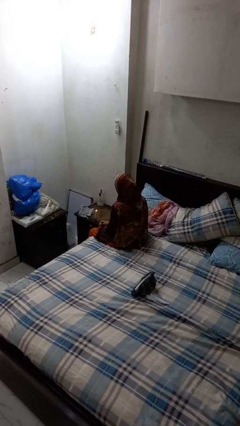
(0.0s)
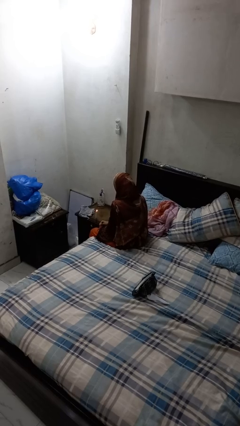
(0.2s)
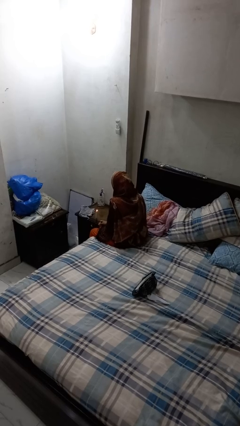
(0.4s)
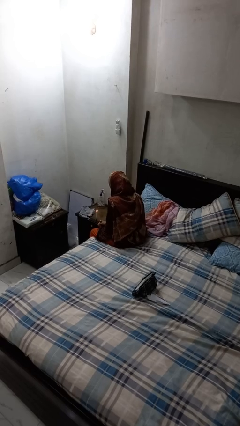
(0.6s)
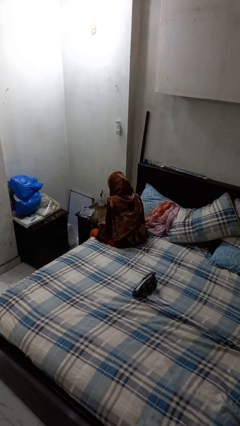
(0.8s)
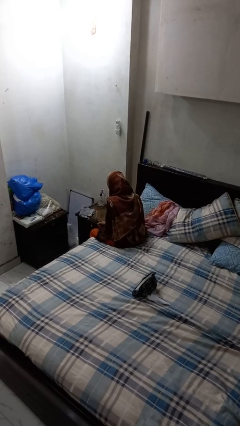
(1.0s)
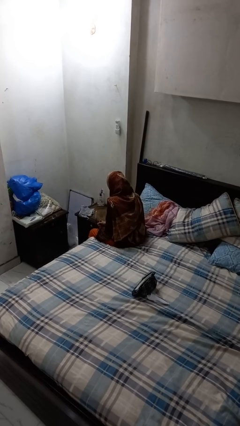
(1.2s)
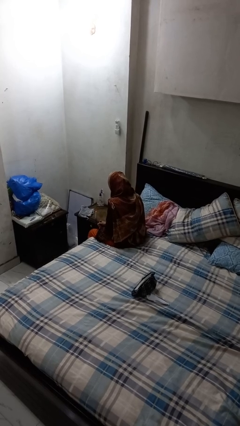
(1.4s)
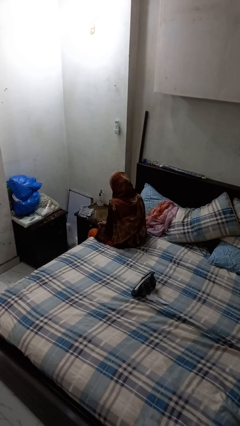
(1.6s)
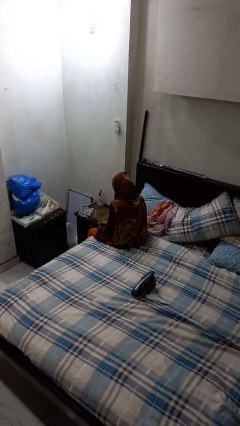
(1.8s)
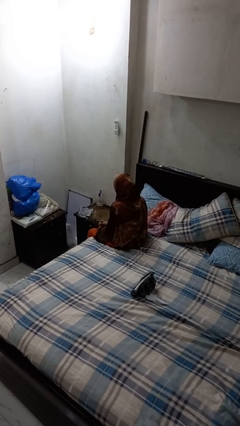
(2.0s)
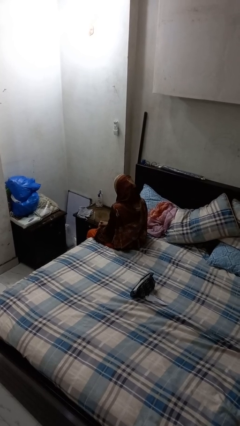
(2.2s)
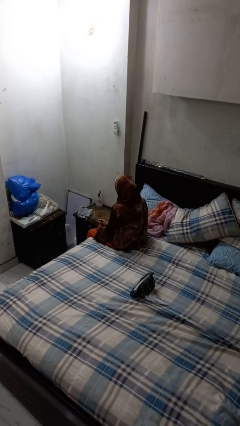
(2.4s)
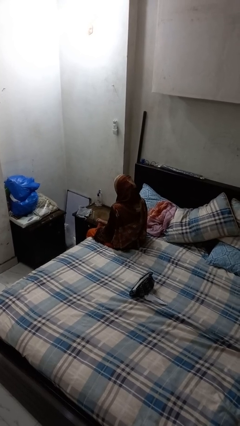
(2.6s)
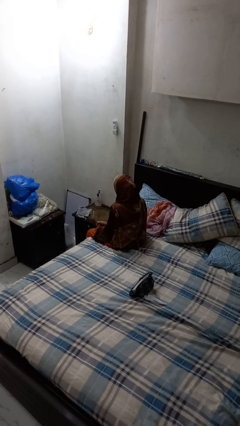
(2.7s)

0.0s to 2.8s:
person extinguishes candle

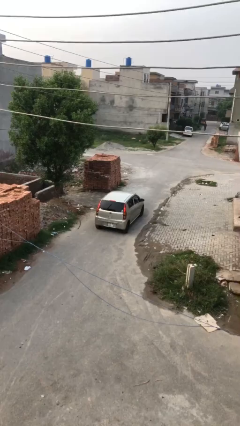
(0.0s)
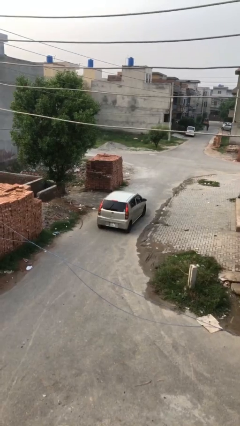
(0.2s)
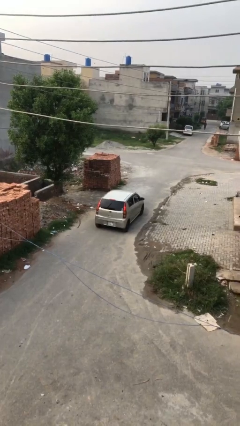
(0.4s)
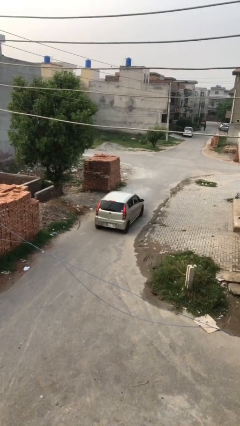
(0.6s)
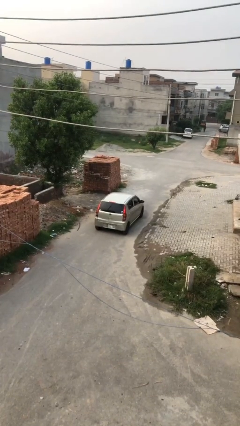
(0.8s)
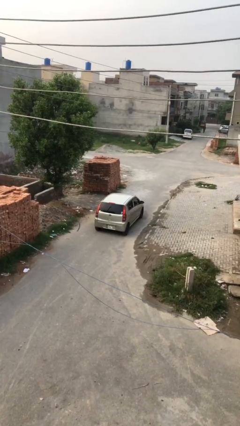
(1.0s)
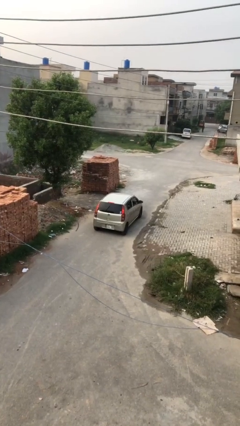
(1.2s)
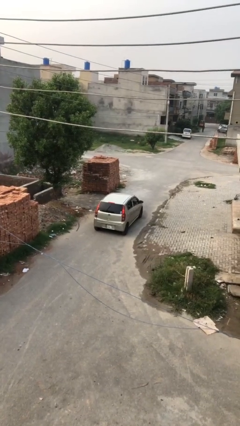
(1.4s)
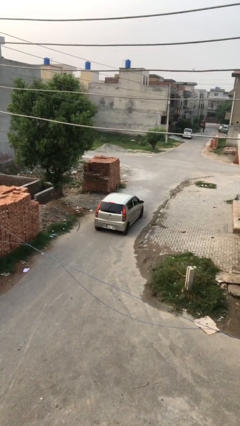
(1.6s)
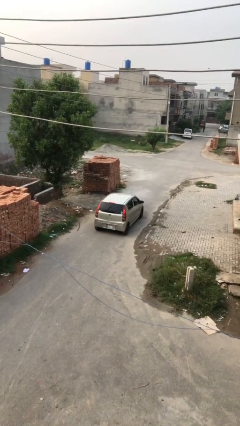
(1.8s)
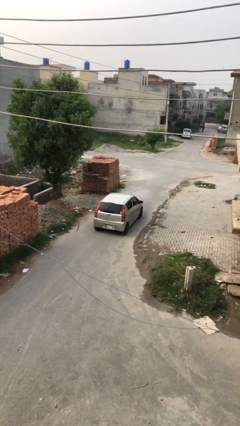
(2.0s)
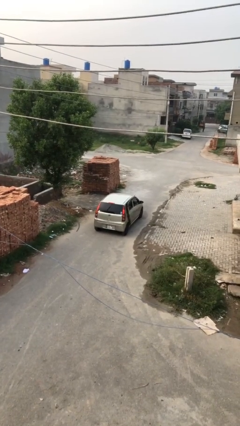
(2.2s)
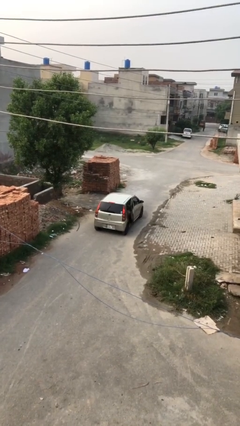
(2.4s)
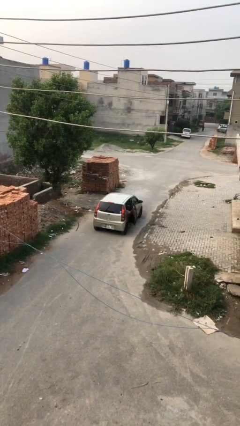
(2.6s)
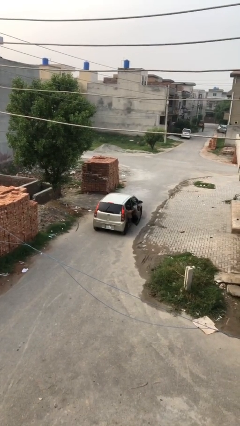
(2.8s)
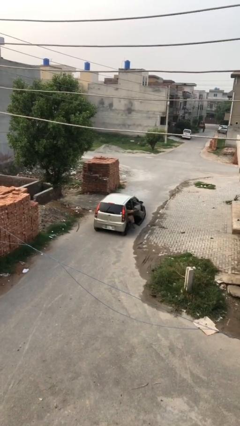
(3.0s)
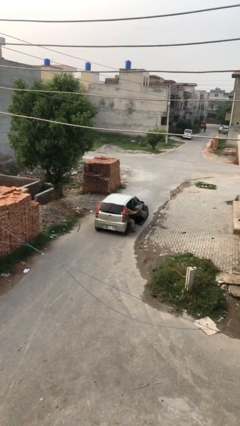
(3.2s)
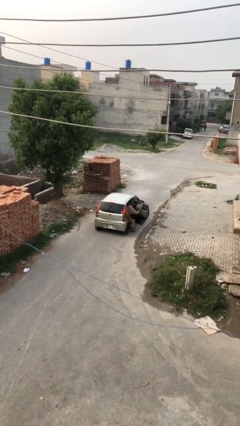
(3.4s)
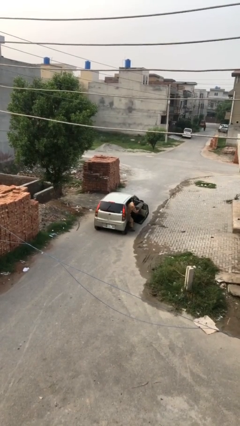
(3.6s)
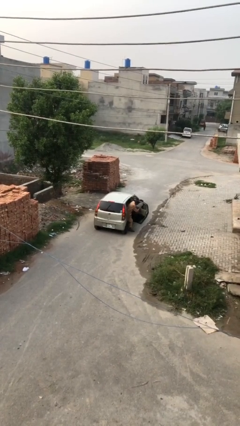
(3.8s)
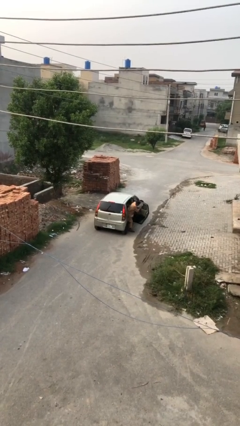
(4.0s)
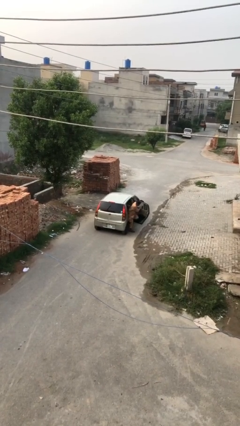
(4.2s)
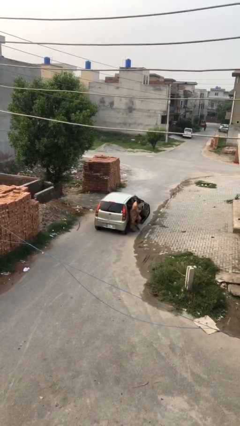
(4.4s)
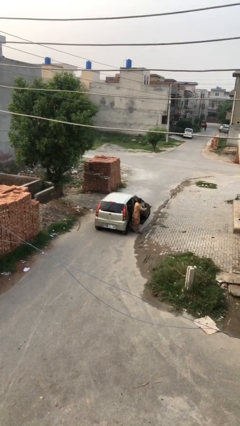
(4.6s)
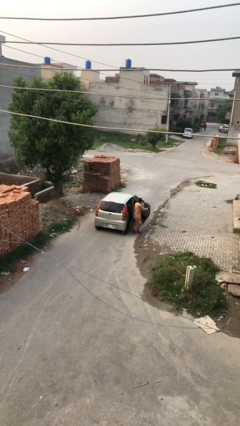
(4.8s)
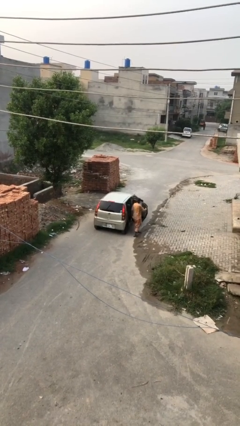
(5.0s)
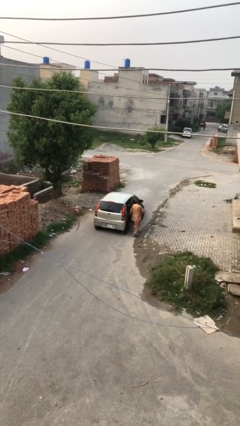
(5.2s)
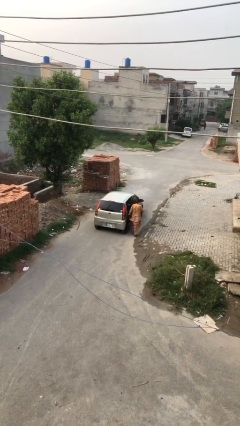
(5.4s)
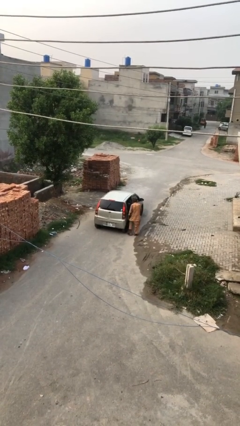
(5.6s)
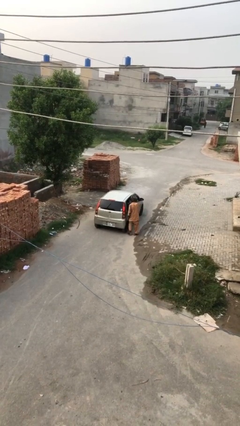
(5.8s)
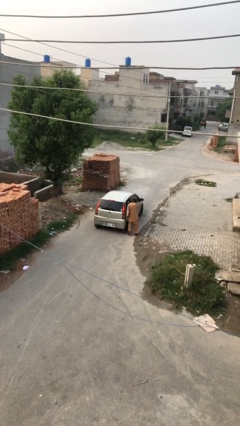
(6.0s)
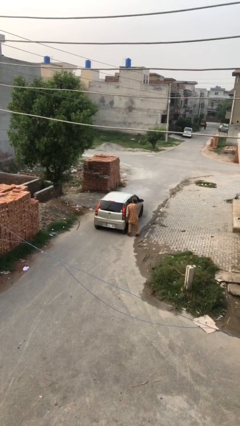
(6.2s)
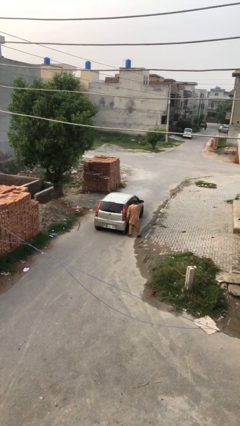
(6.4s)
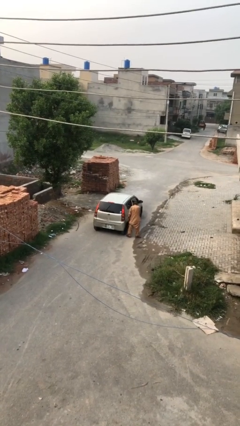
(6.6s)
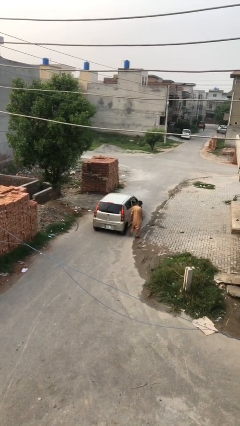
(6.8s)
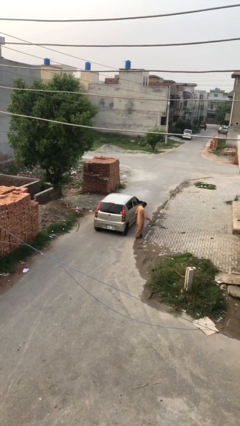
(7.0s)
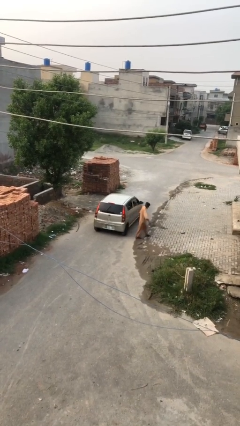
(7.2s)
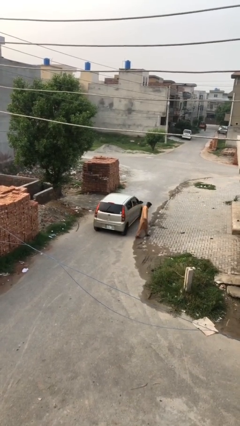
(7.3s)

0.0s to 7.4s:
car drops off person

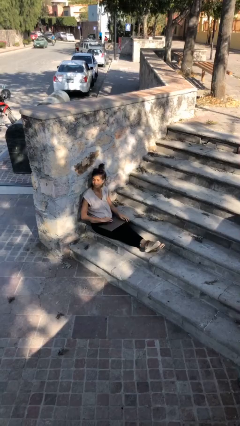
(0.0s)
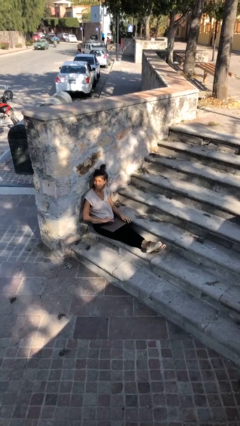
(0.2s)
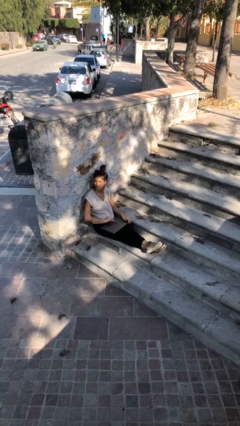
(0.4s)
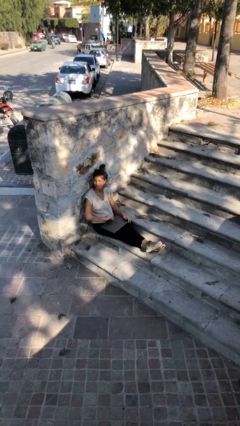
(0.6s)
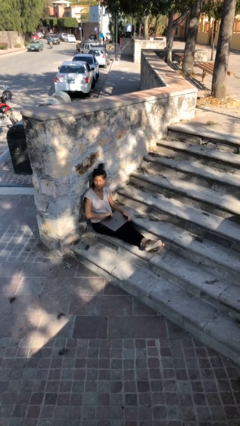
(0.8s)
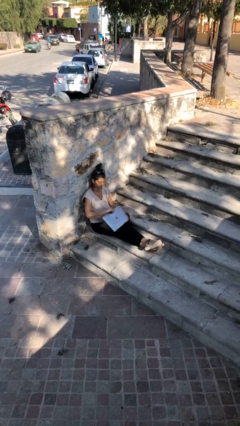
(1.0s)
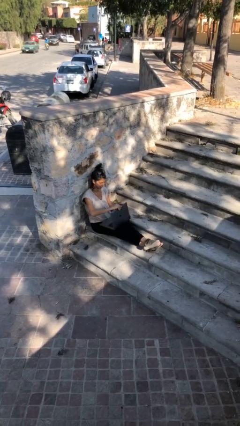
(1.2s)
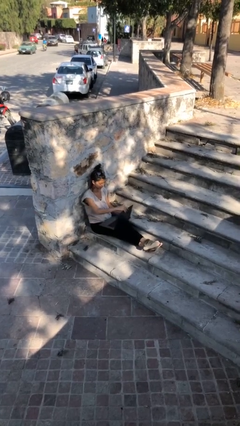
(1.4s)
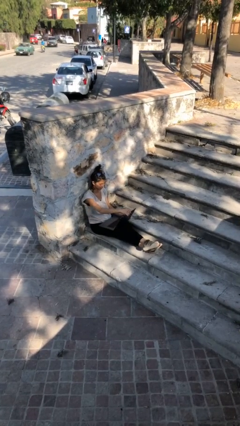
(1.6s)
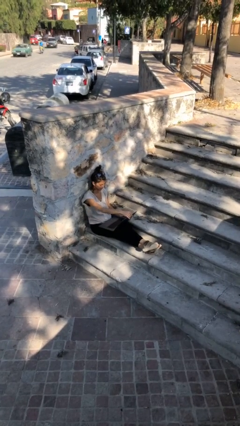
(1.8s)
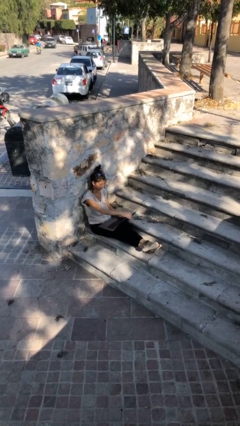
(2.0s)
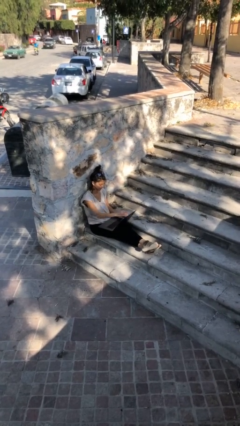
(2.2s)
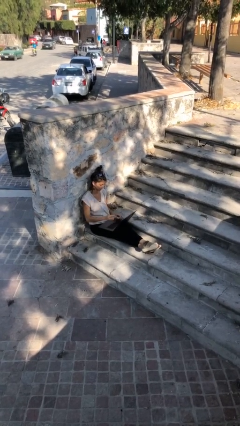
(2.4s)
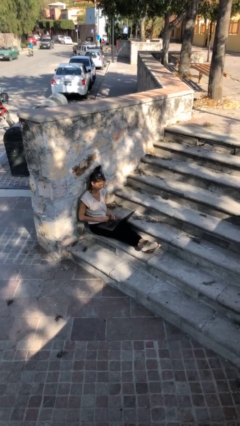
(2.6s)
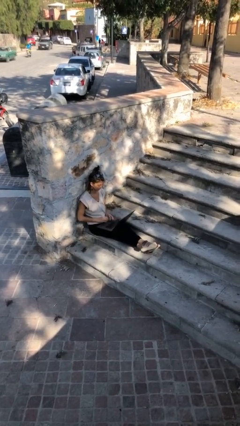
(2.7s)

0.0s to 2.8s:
person interacts with laptop

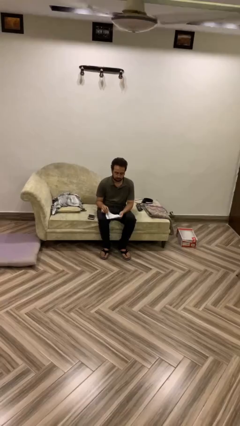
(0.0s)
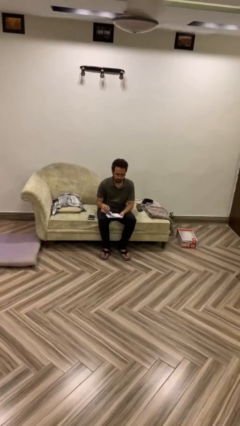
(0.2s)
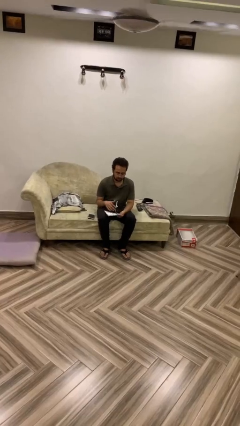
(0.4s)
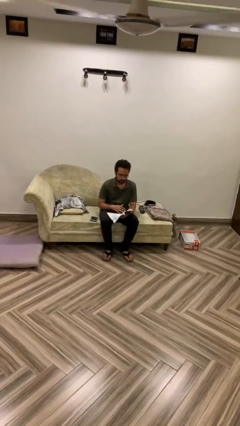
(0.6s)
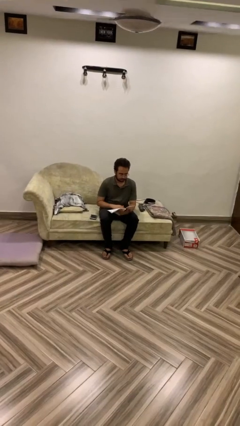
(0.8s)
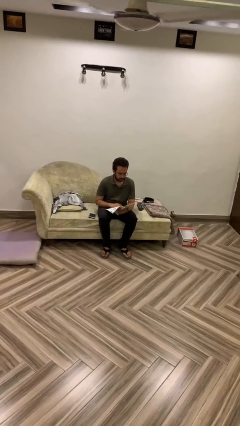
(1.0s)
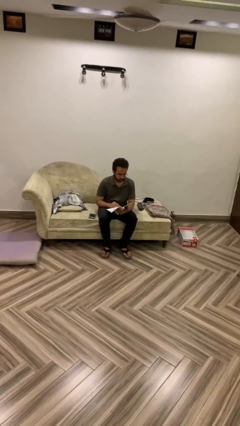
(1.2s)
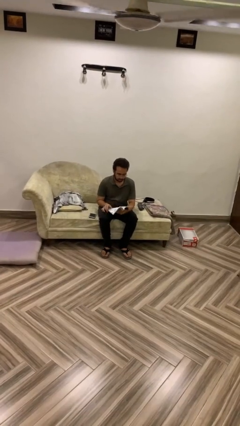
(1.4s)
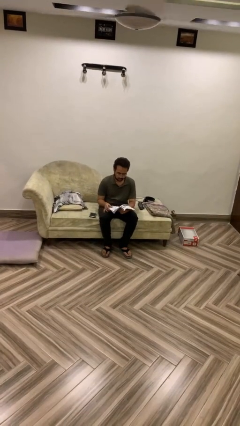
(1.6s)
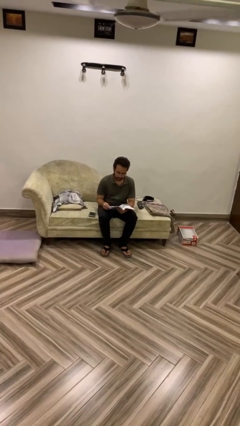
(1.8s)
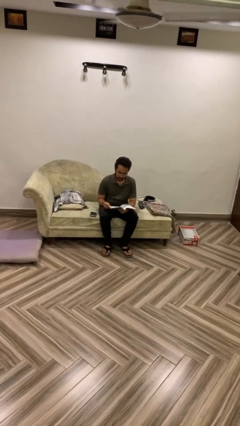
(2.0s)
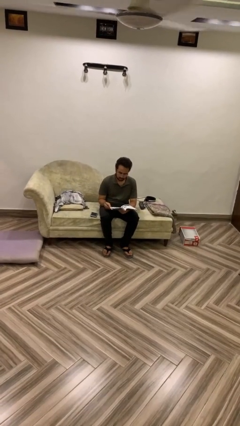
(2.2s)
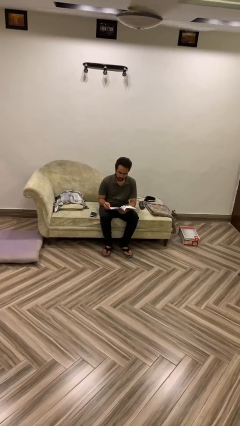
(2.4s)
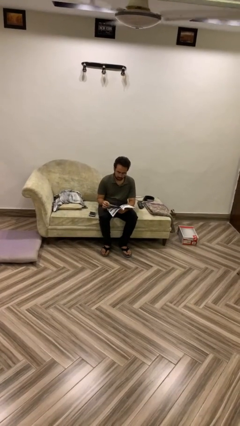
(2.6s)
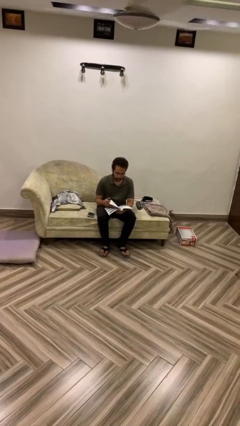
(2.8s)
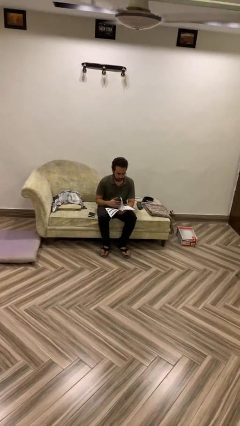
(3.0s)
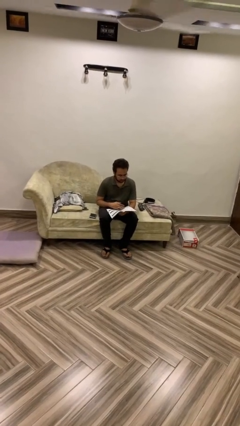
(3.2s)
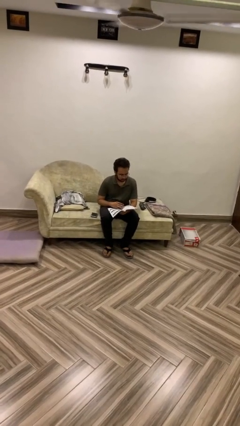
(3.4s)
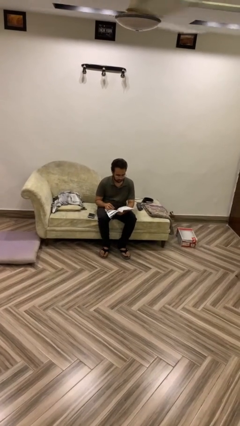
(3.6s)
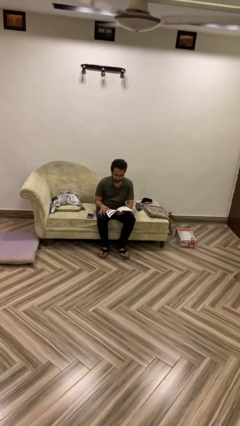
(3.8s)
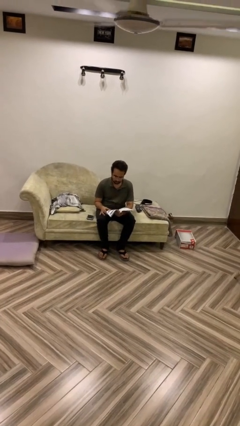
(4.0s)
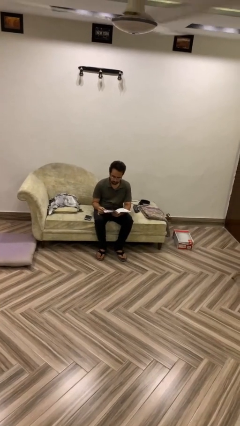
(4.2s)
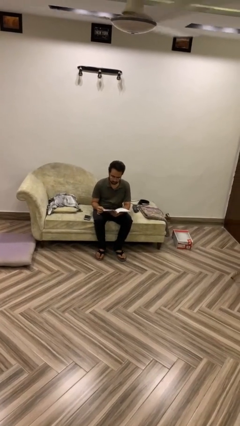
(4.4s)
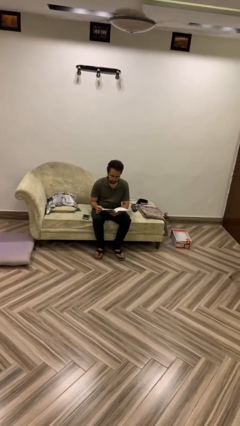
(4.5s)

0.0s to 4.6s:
person reads document
